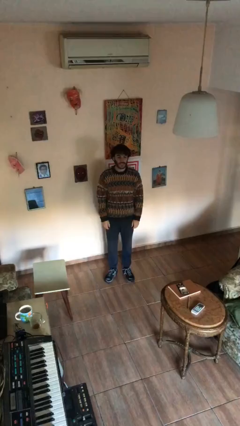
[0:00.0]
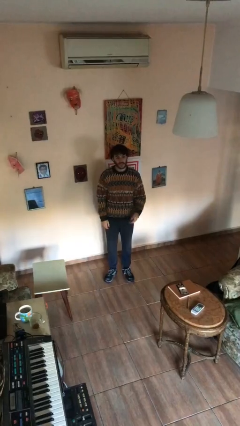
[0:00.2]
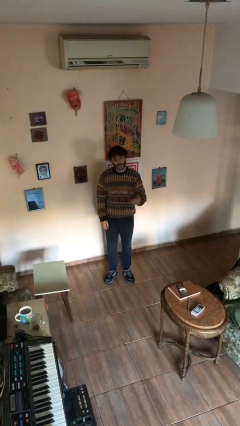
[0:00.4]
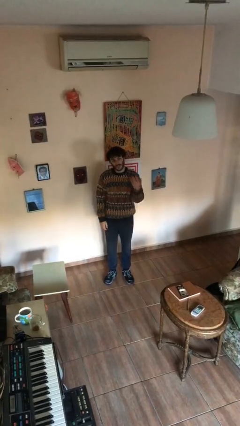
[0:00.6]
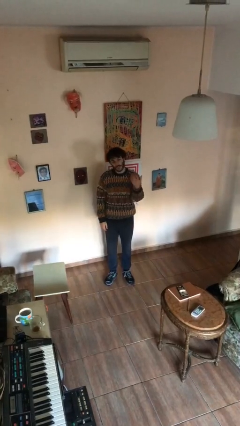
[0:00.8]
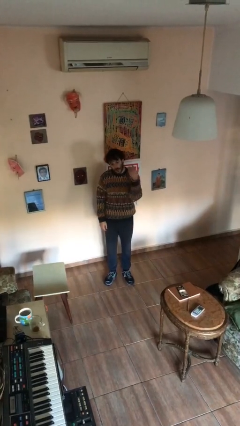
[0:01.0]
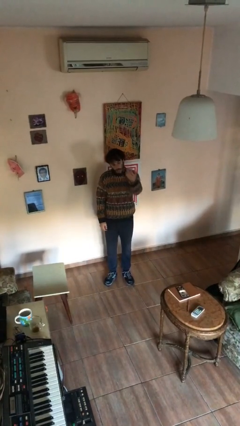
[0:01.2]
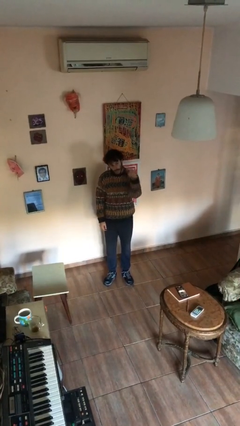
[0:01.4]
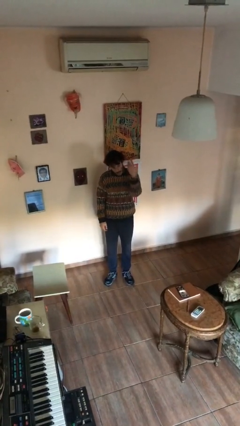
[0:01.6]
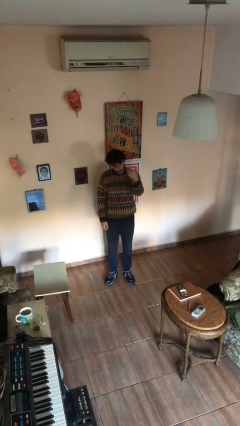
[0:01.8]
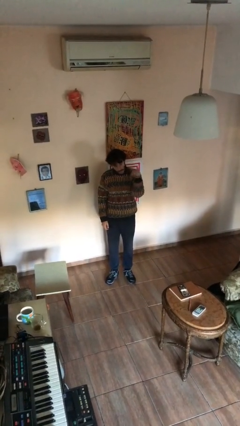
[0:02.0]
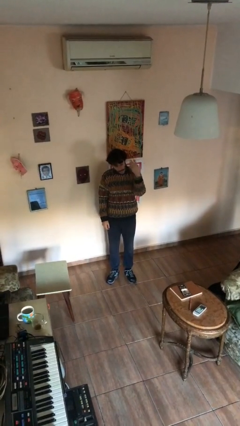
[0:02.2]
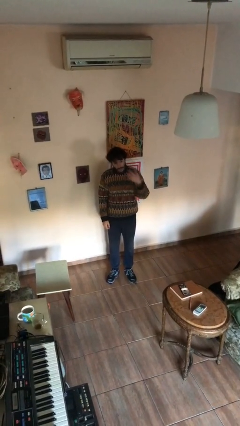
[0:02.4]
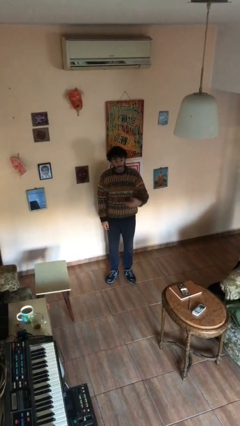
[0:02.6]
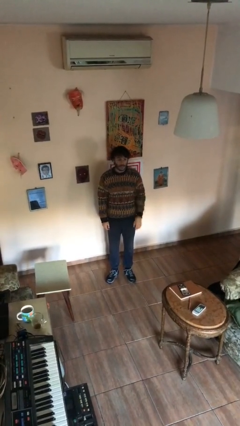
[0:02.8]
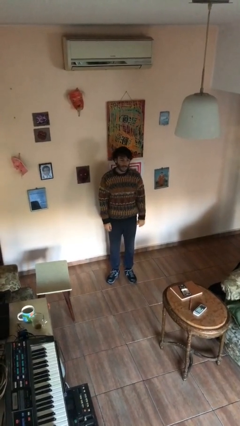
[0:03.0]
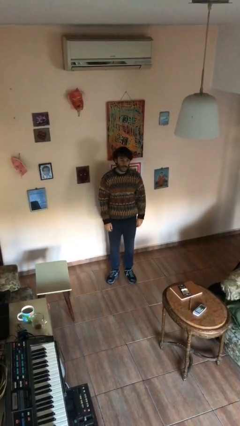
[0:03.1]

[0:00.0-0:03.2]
person gestures come here

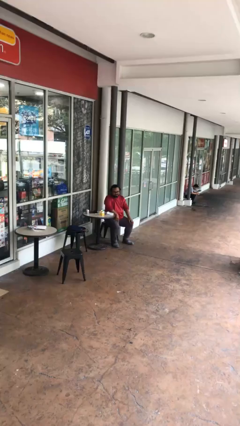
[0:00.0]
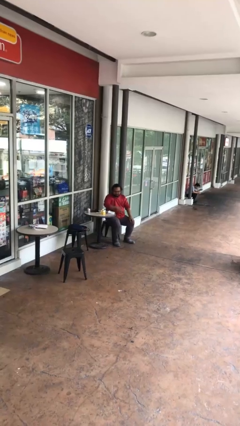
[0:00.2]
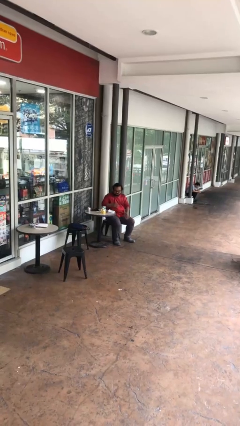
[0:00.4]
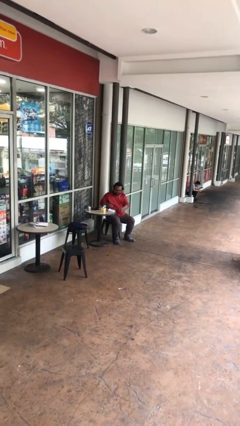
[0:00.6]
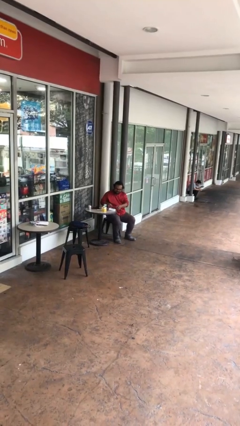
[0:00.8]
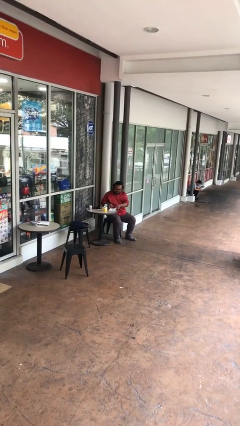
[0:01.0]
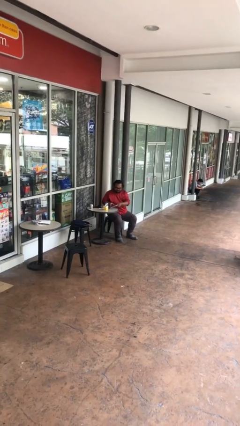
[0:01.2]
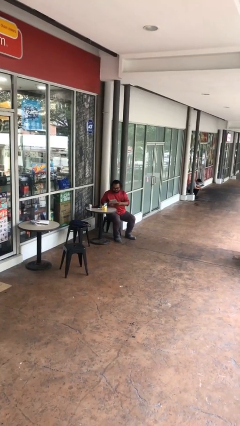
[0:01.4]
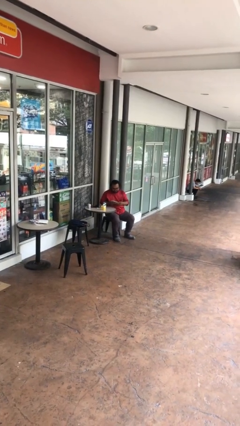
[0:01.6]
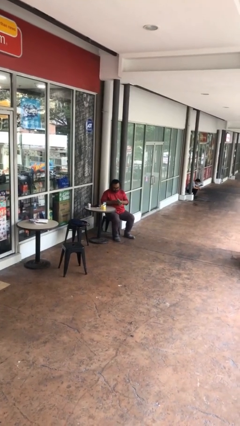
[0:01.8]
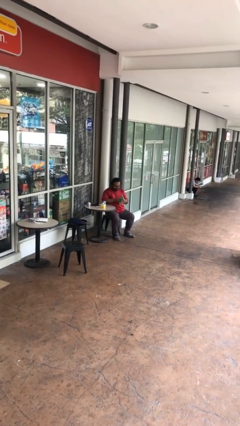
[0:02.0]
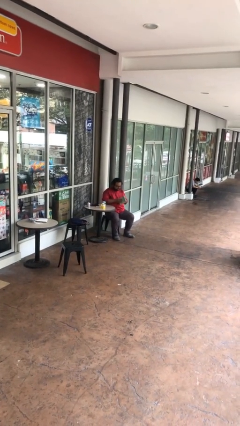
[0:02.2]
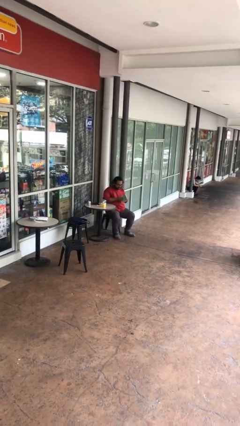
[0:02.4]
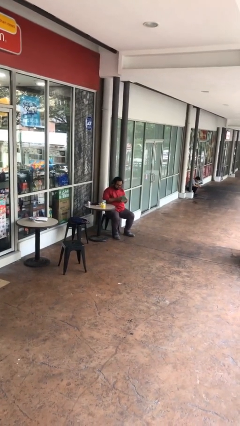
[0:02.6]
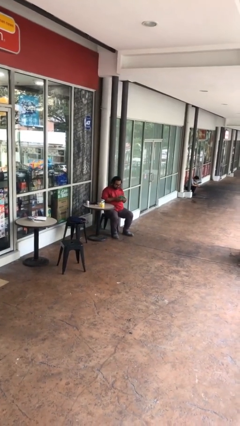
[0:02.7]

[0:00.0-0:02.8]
person picks up object from table

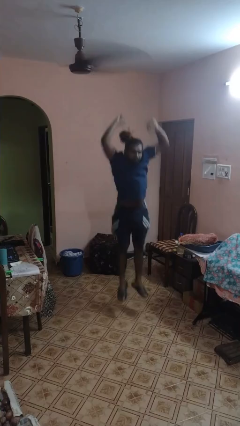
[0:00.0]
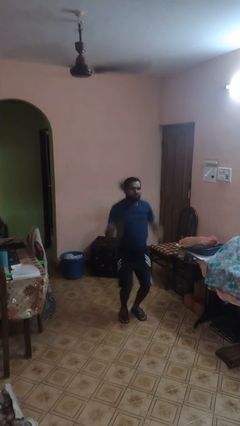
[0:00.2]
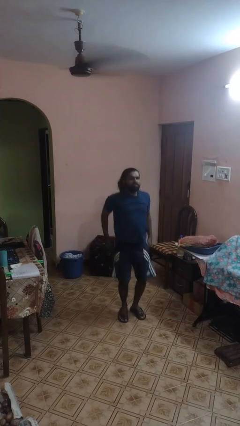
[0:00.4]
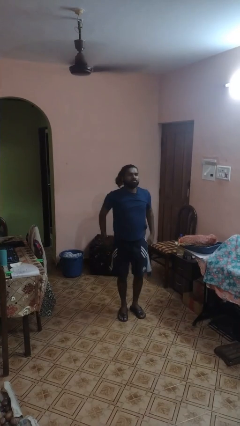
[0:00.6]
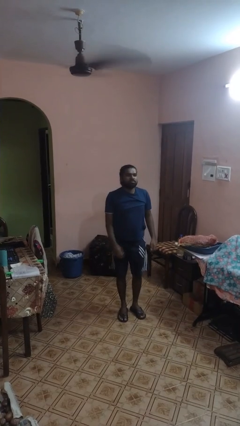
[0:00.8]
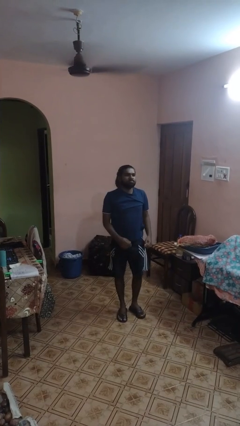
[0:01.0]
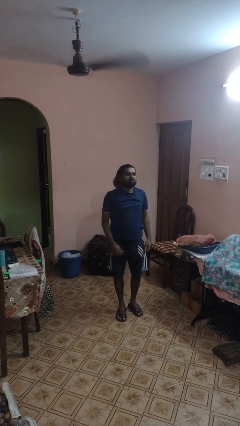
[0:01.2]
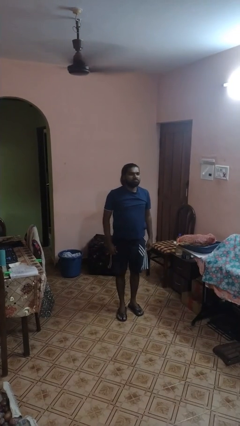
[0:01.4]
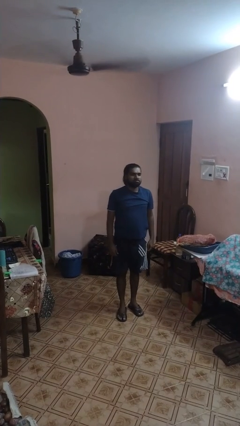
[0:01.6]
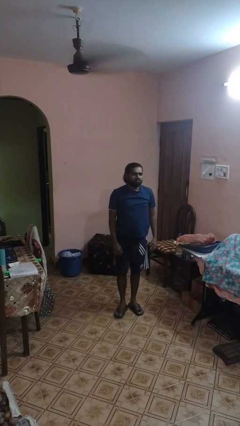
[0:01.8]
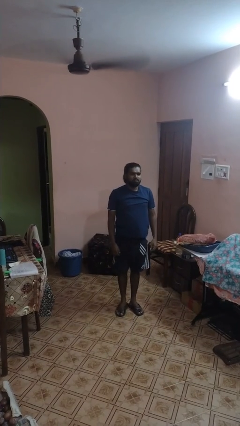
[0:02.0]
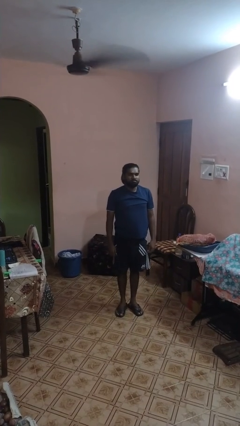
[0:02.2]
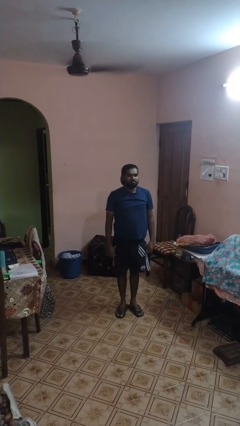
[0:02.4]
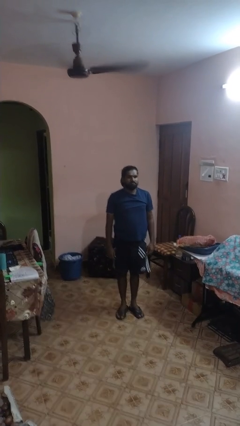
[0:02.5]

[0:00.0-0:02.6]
person jumps

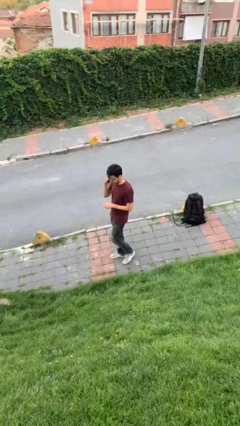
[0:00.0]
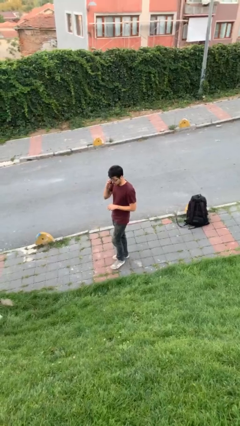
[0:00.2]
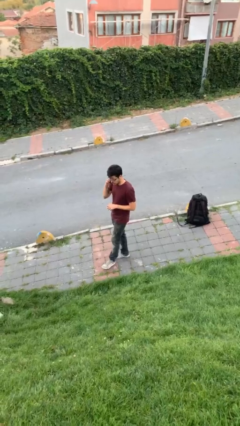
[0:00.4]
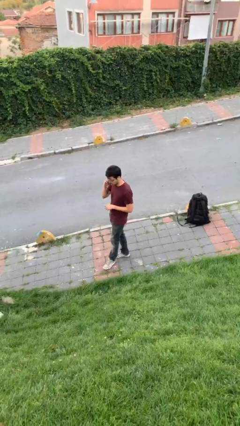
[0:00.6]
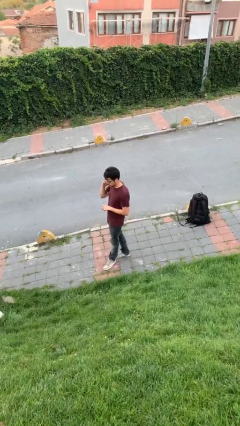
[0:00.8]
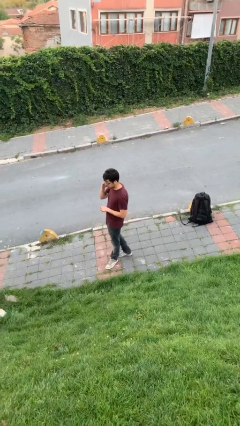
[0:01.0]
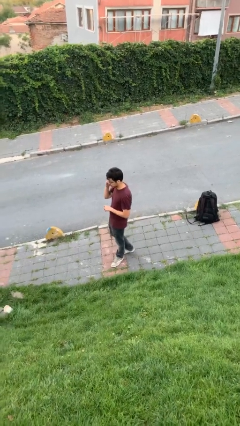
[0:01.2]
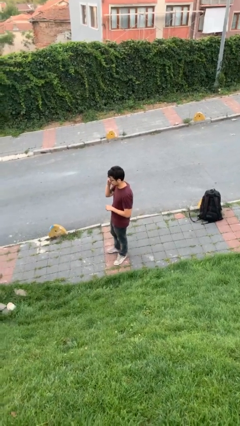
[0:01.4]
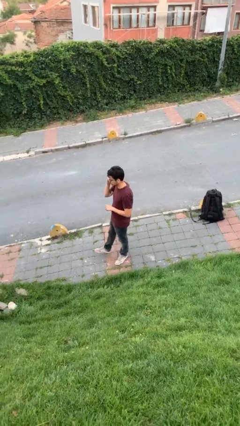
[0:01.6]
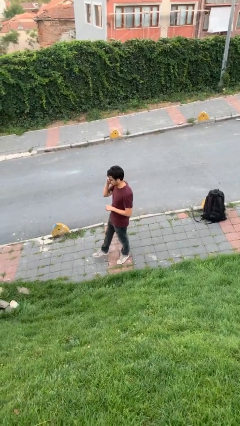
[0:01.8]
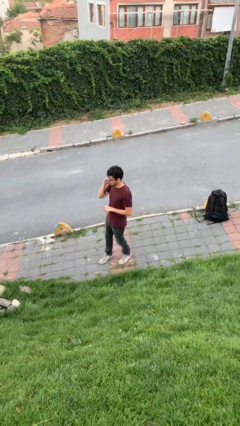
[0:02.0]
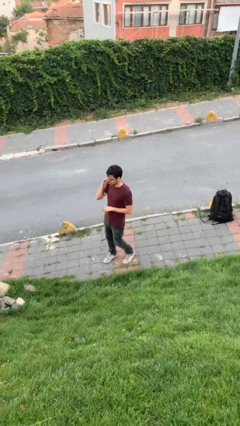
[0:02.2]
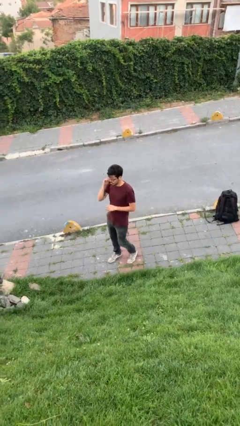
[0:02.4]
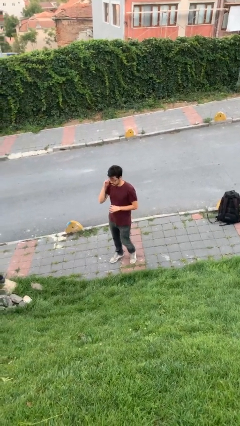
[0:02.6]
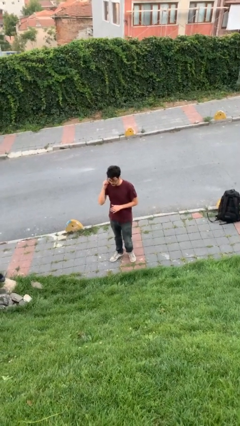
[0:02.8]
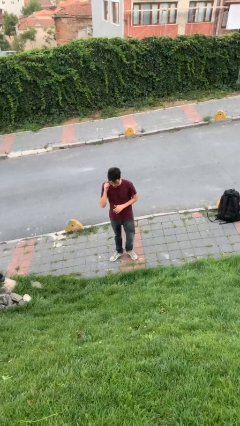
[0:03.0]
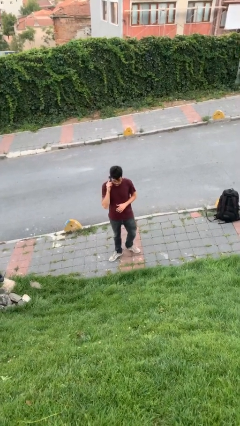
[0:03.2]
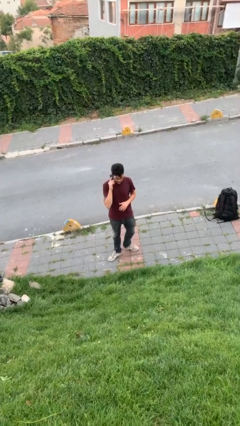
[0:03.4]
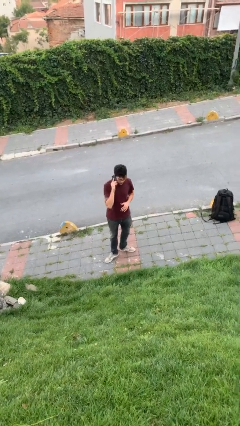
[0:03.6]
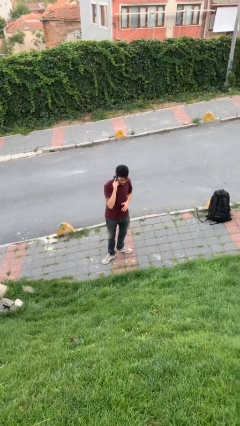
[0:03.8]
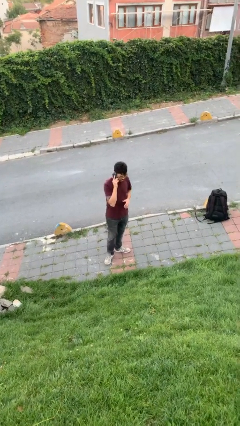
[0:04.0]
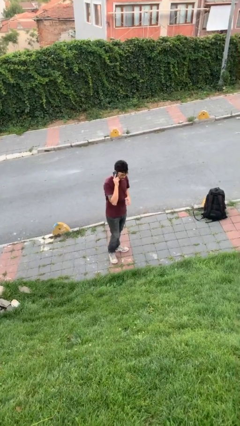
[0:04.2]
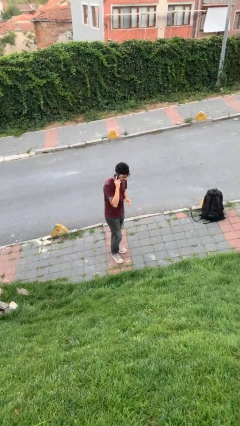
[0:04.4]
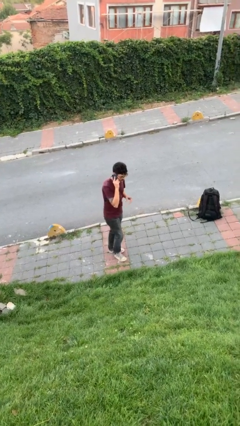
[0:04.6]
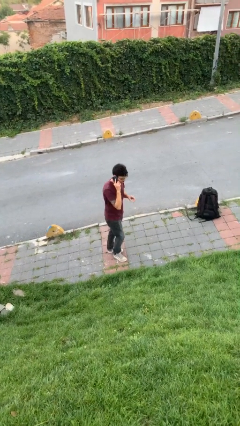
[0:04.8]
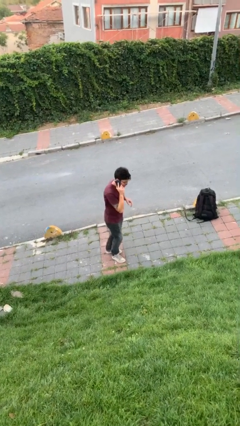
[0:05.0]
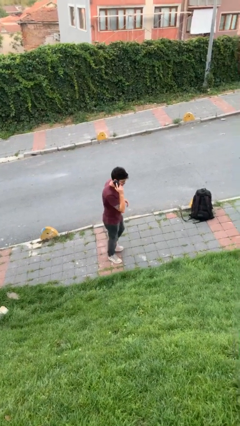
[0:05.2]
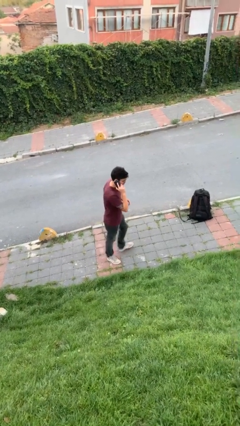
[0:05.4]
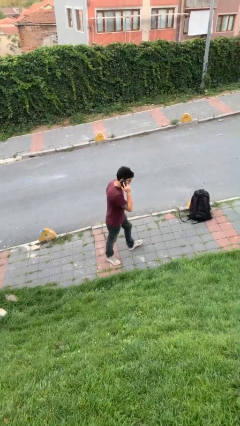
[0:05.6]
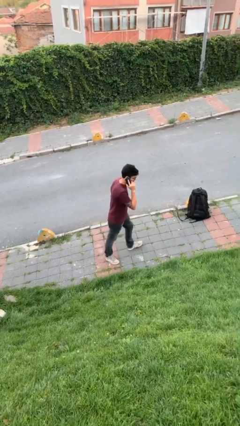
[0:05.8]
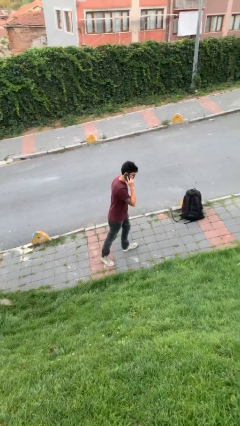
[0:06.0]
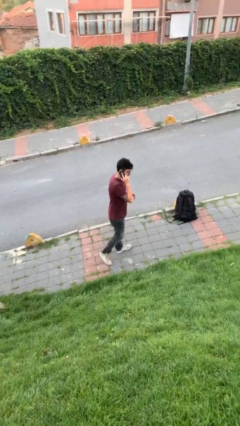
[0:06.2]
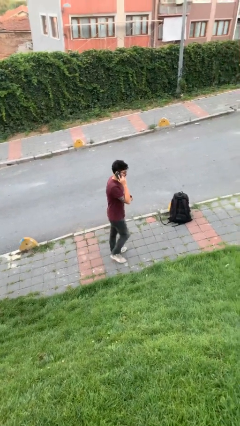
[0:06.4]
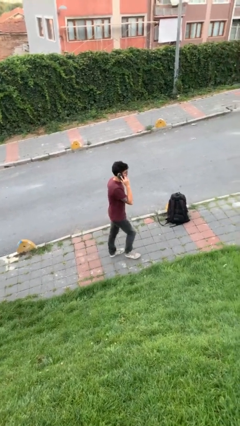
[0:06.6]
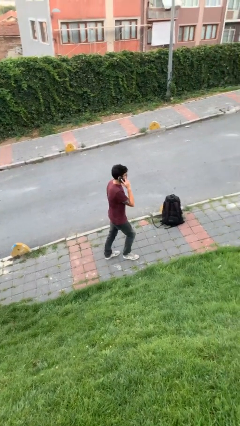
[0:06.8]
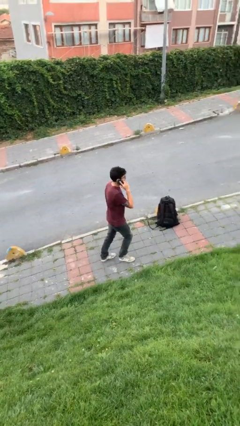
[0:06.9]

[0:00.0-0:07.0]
person talks on phone

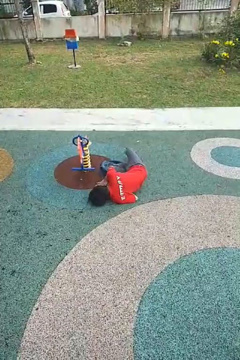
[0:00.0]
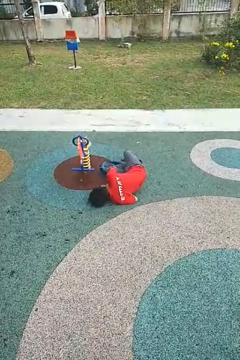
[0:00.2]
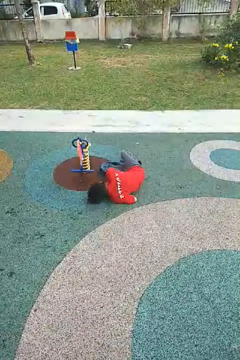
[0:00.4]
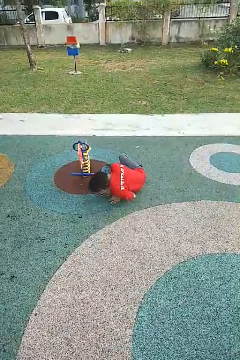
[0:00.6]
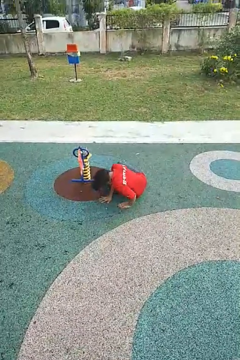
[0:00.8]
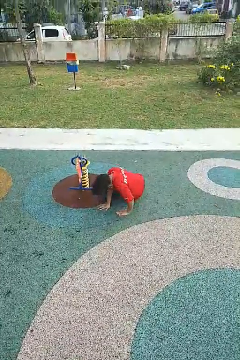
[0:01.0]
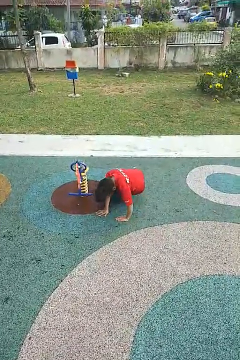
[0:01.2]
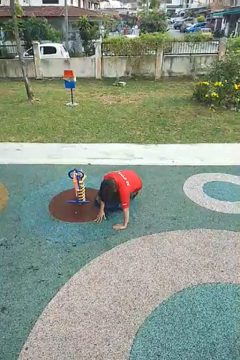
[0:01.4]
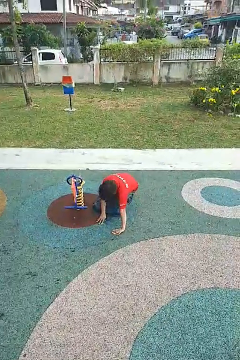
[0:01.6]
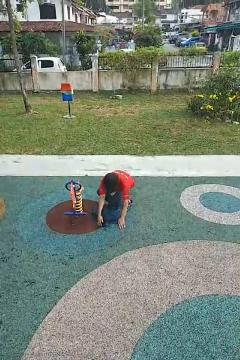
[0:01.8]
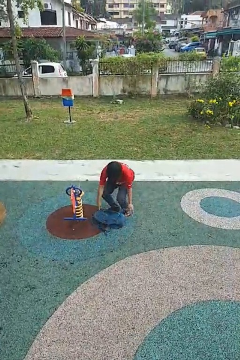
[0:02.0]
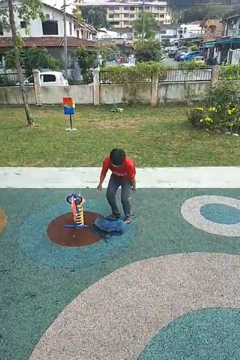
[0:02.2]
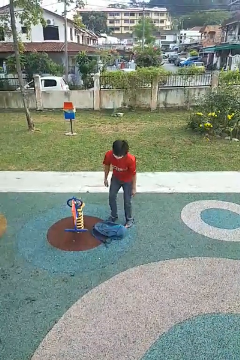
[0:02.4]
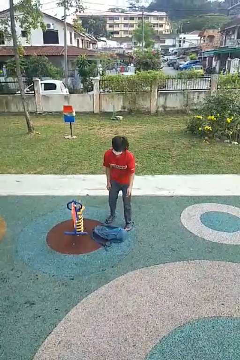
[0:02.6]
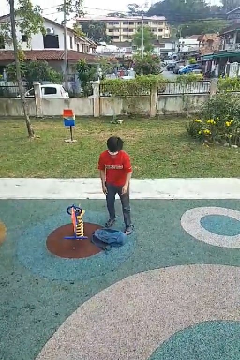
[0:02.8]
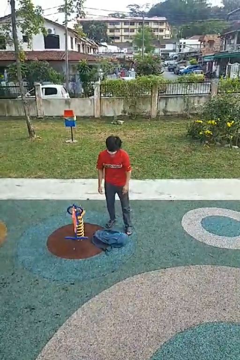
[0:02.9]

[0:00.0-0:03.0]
person stands up from floor
